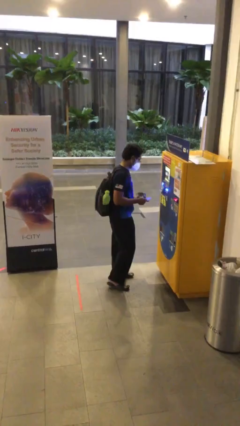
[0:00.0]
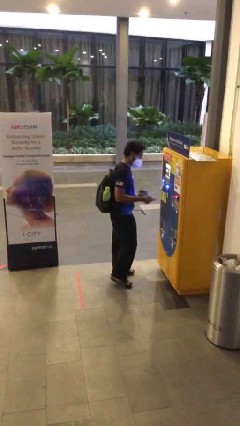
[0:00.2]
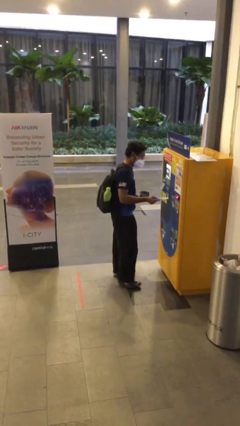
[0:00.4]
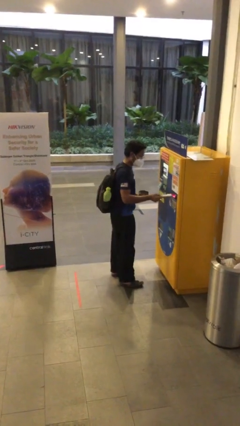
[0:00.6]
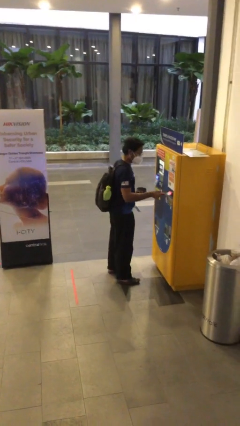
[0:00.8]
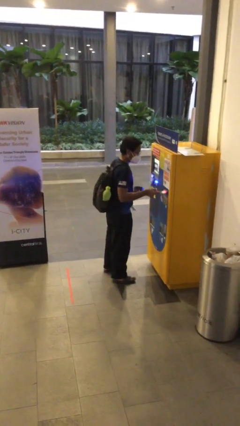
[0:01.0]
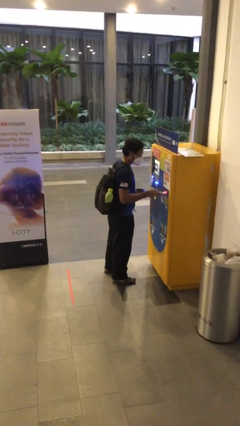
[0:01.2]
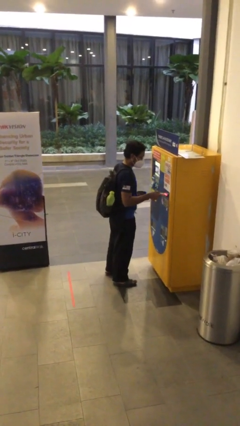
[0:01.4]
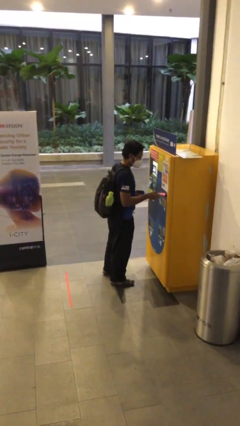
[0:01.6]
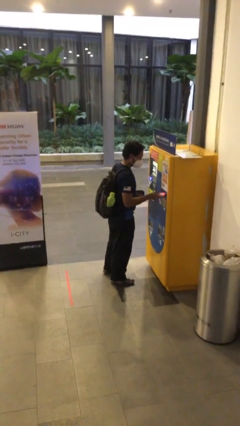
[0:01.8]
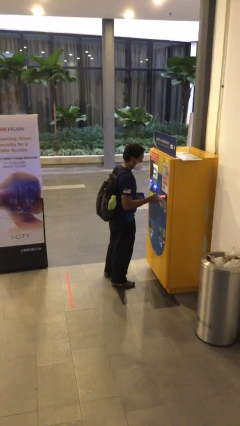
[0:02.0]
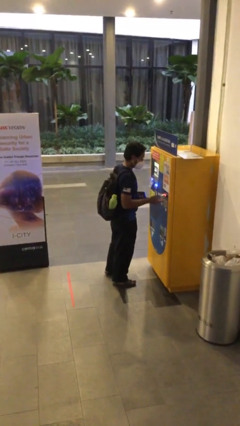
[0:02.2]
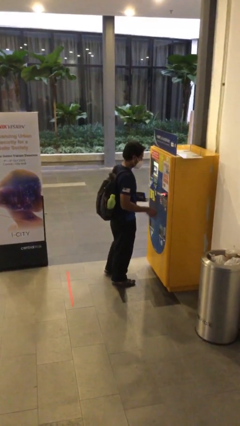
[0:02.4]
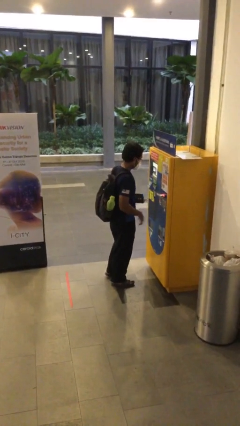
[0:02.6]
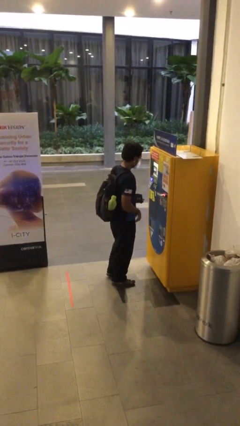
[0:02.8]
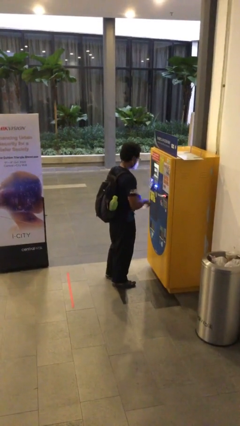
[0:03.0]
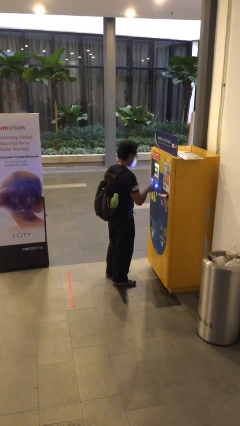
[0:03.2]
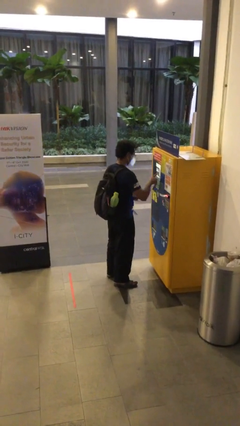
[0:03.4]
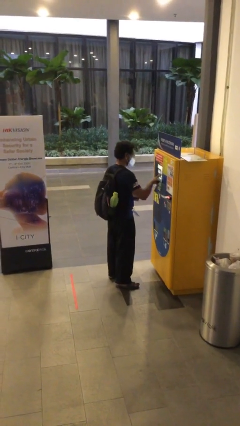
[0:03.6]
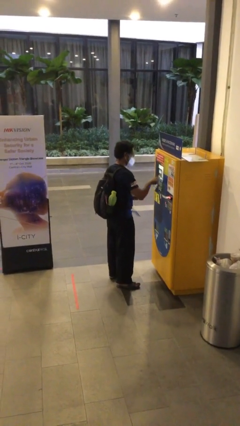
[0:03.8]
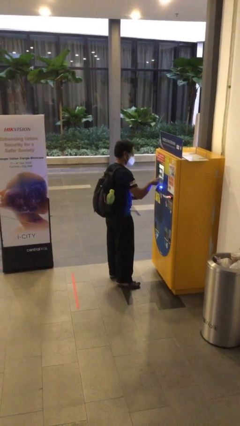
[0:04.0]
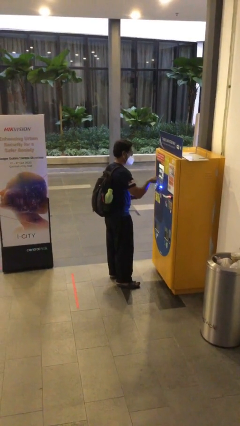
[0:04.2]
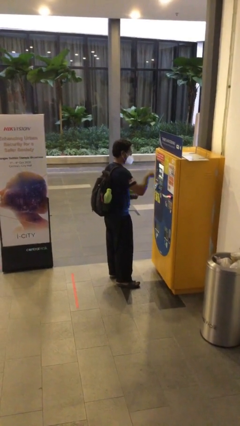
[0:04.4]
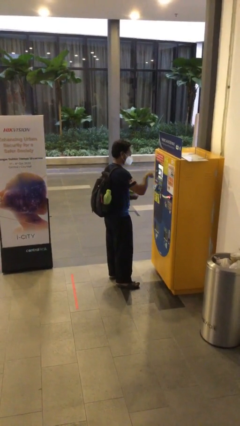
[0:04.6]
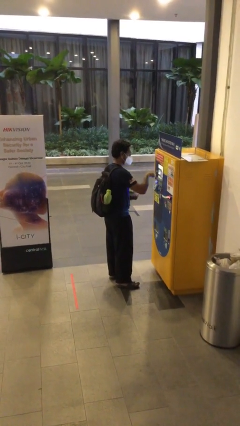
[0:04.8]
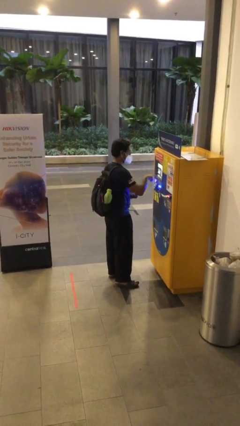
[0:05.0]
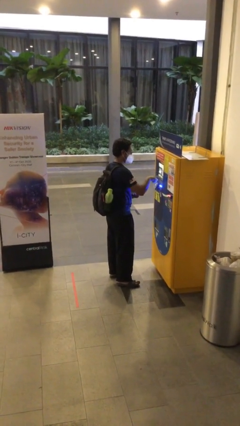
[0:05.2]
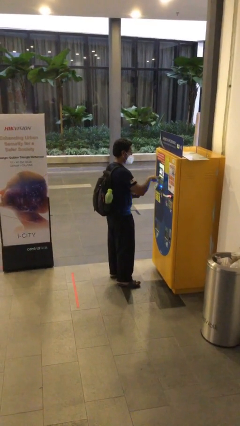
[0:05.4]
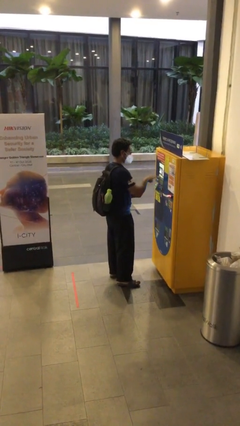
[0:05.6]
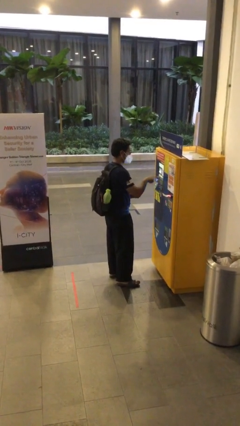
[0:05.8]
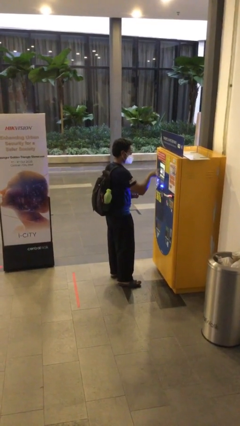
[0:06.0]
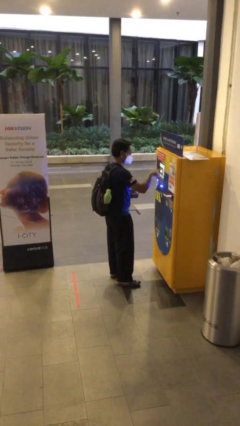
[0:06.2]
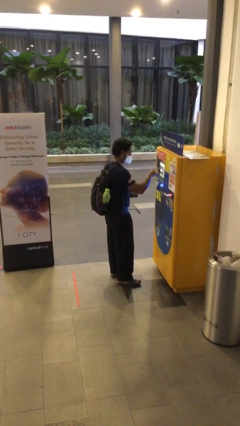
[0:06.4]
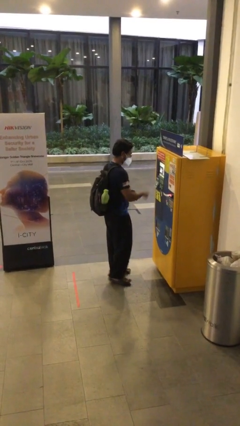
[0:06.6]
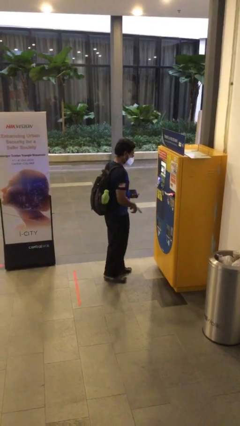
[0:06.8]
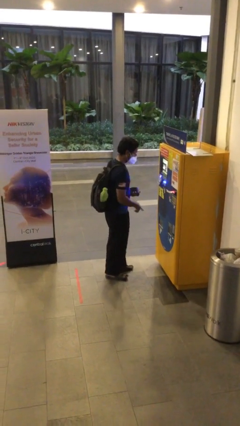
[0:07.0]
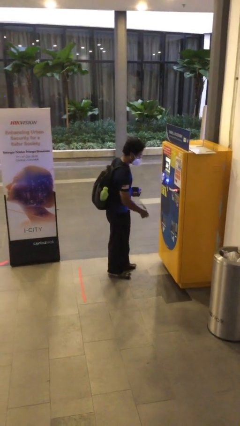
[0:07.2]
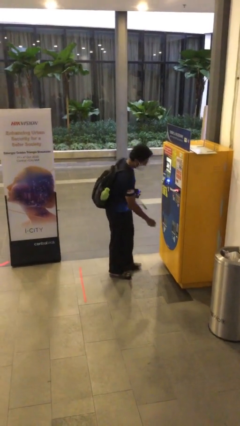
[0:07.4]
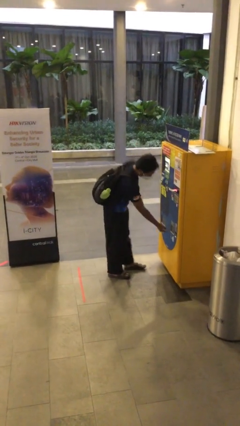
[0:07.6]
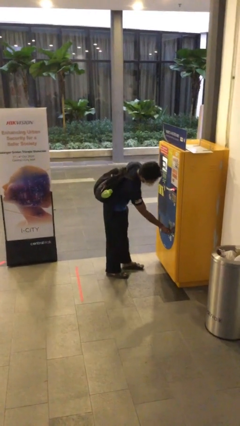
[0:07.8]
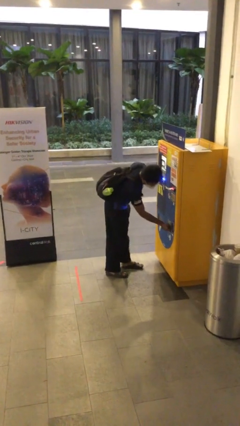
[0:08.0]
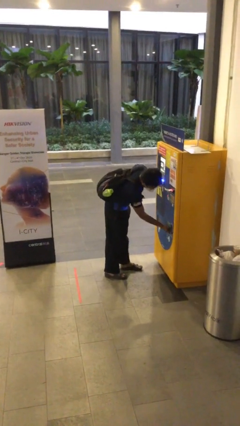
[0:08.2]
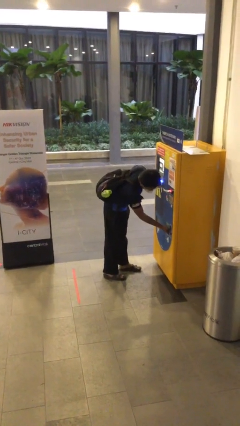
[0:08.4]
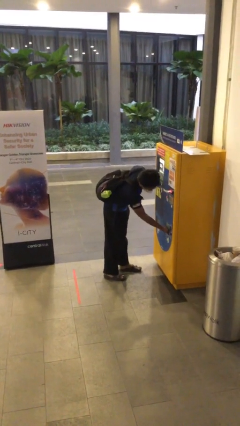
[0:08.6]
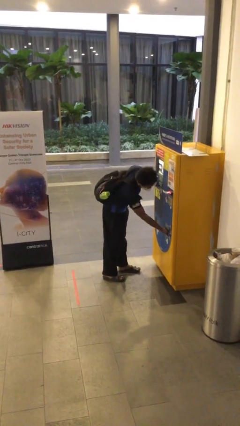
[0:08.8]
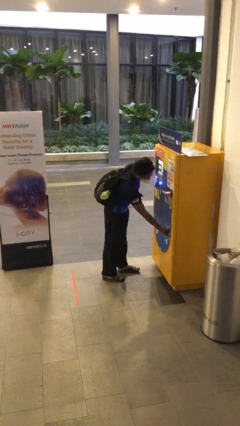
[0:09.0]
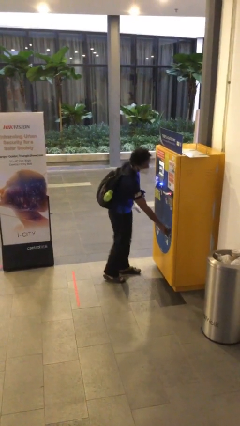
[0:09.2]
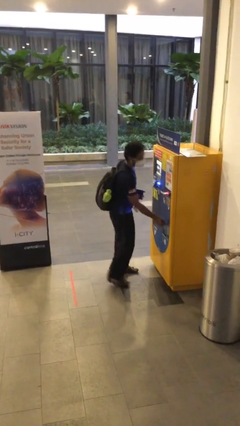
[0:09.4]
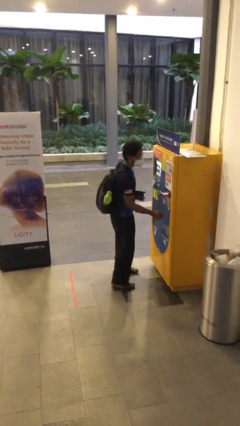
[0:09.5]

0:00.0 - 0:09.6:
person purchases from machine

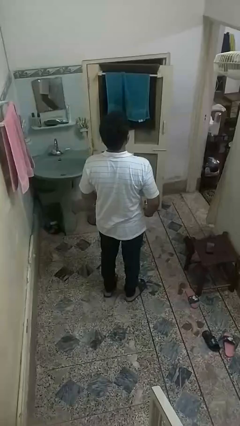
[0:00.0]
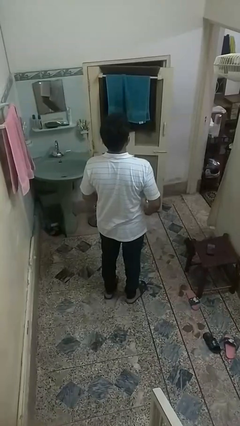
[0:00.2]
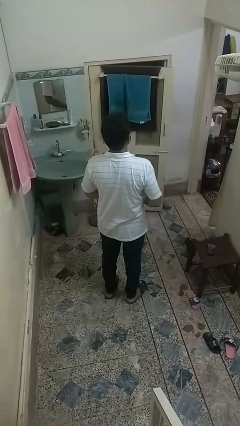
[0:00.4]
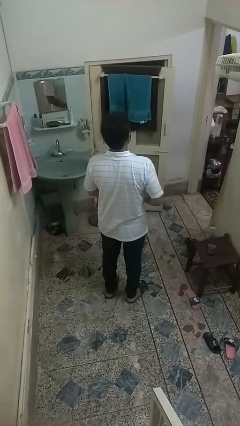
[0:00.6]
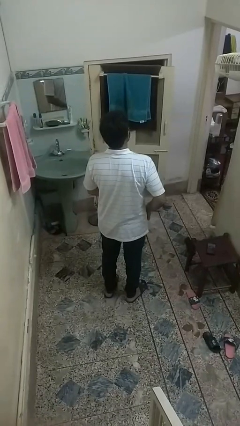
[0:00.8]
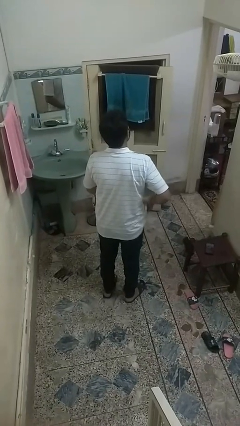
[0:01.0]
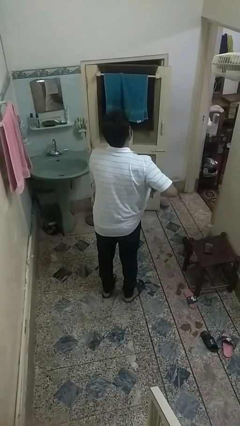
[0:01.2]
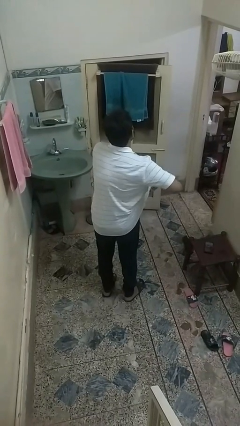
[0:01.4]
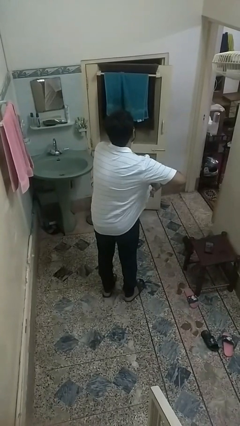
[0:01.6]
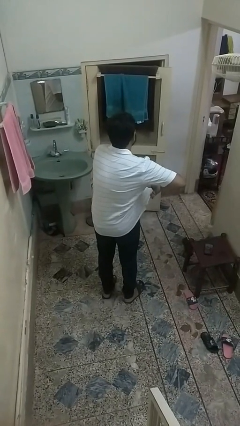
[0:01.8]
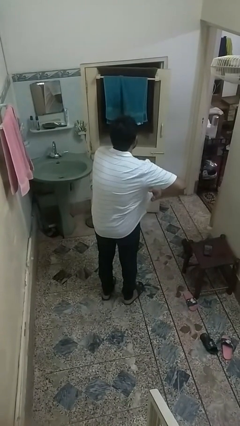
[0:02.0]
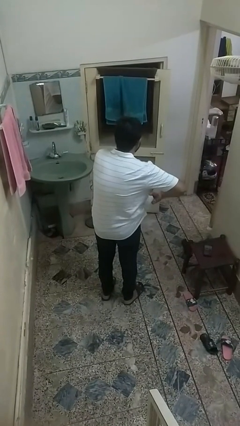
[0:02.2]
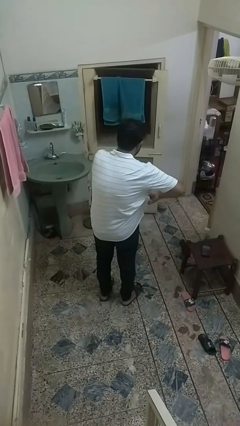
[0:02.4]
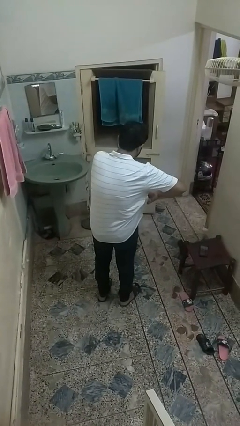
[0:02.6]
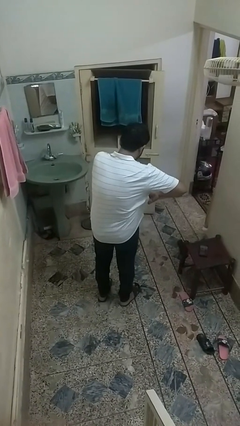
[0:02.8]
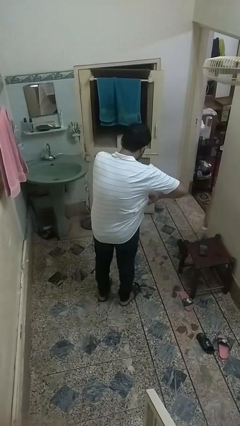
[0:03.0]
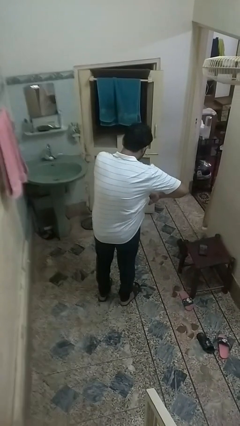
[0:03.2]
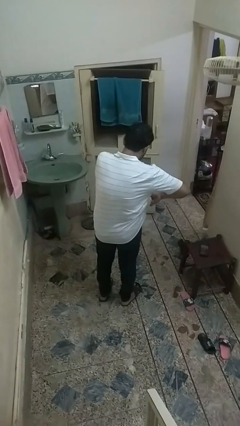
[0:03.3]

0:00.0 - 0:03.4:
person applies deodorant

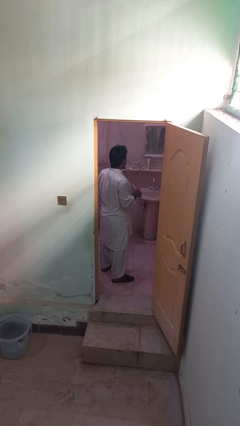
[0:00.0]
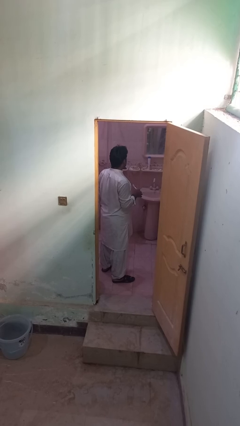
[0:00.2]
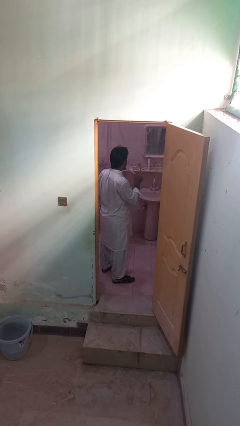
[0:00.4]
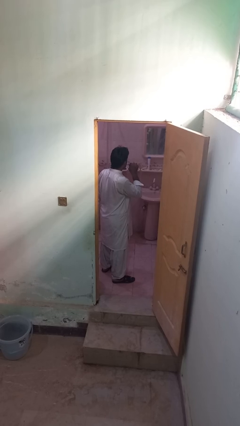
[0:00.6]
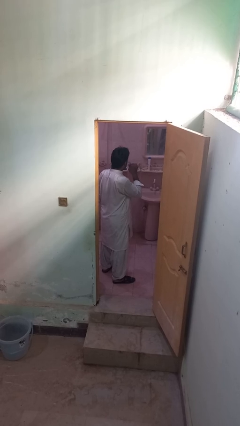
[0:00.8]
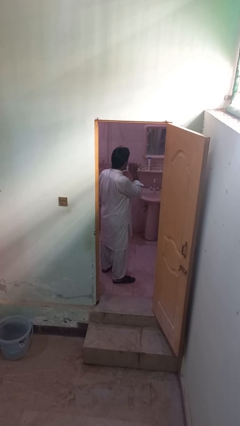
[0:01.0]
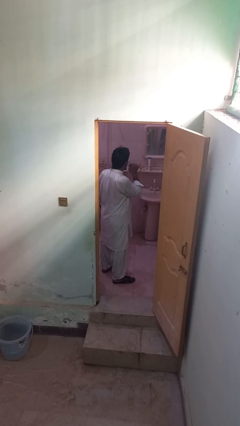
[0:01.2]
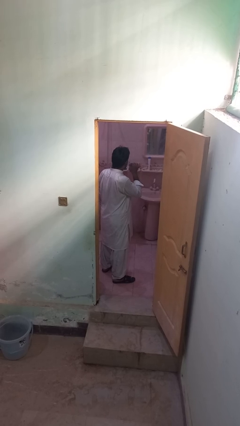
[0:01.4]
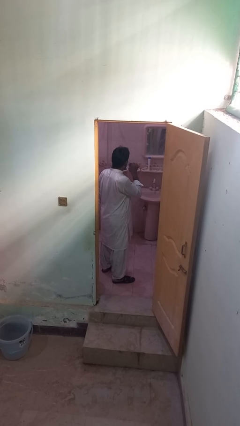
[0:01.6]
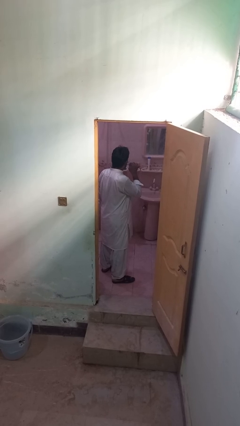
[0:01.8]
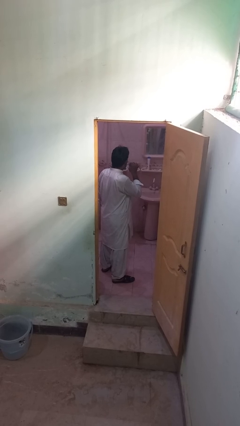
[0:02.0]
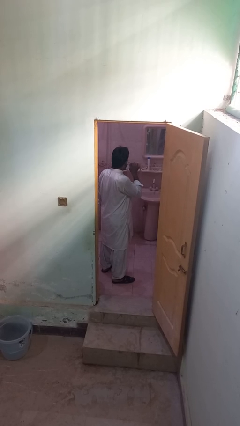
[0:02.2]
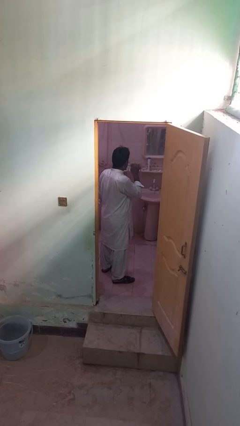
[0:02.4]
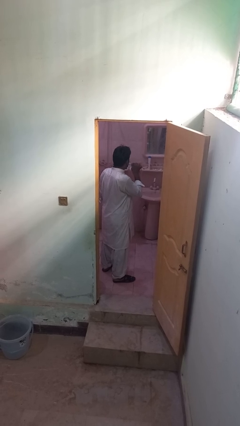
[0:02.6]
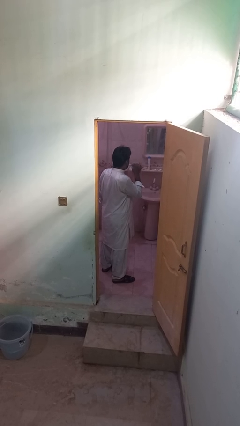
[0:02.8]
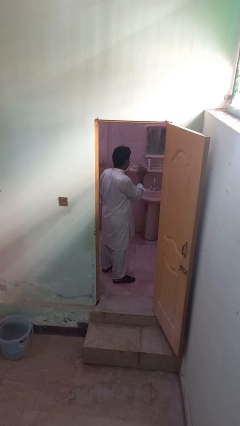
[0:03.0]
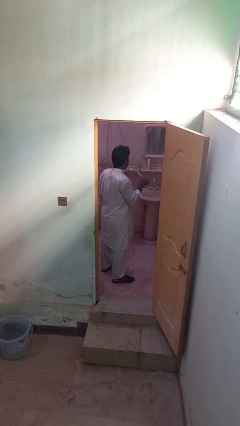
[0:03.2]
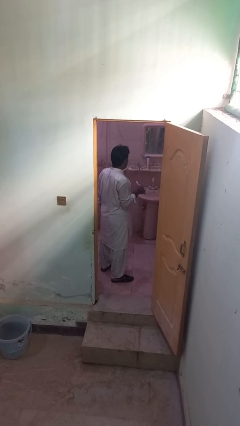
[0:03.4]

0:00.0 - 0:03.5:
person brushes teeth

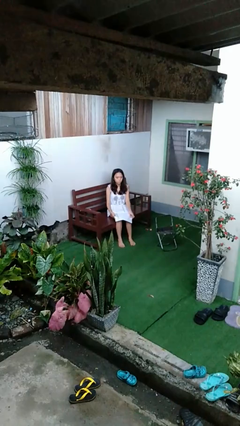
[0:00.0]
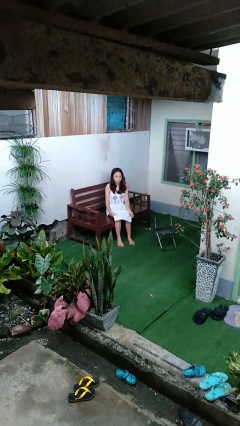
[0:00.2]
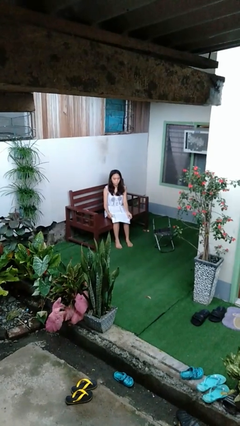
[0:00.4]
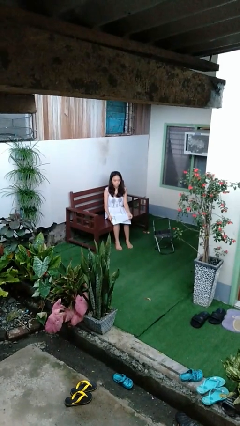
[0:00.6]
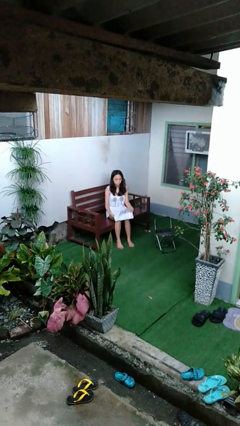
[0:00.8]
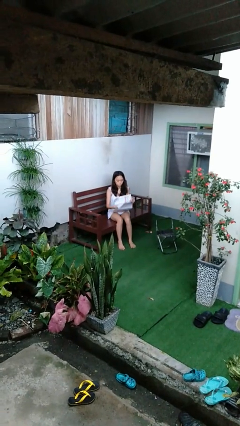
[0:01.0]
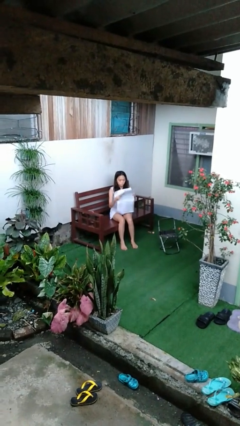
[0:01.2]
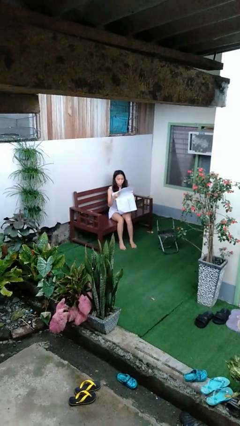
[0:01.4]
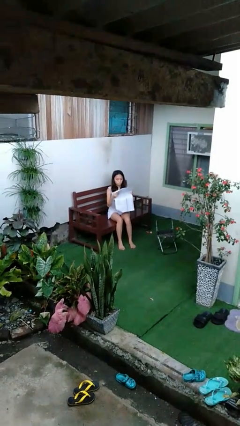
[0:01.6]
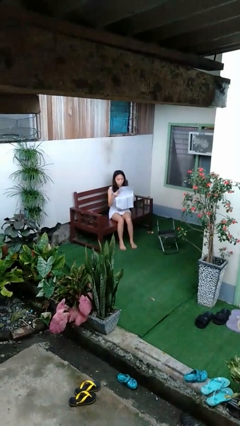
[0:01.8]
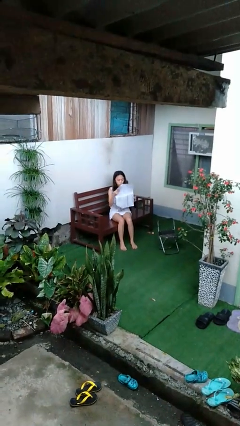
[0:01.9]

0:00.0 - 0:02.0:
person reads newspaper
